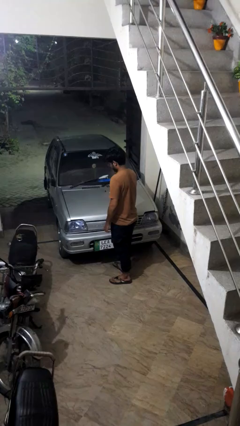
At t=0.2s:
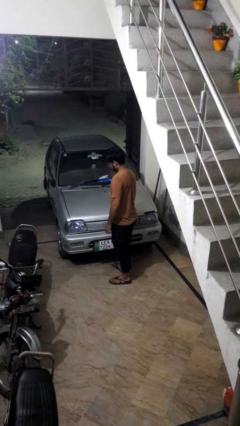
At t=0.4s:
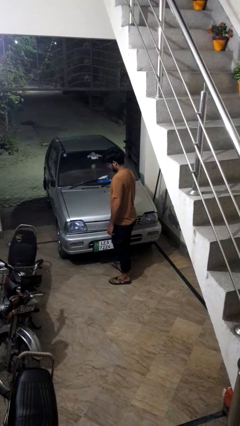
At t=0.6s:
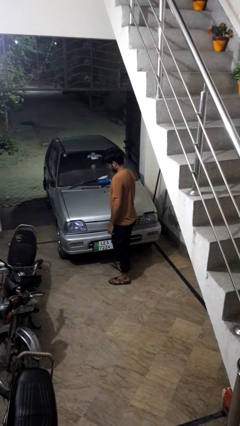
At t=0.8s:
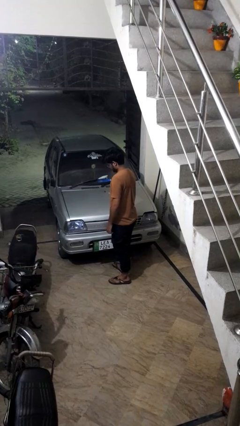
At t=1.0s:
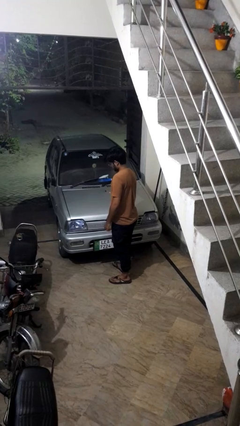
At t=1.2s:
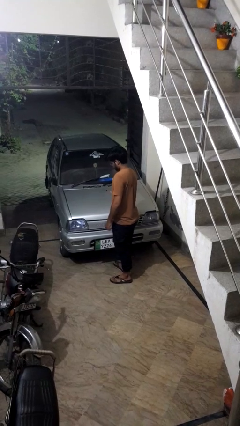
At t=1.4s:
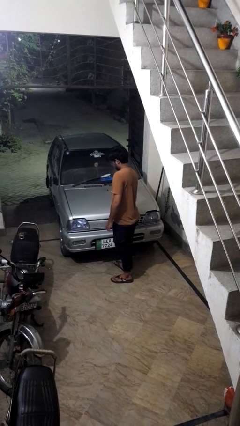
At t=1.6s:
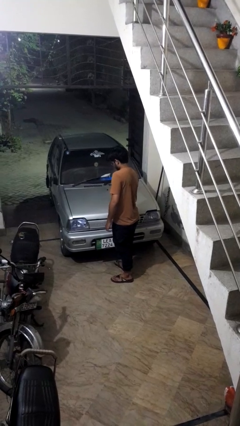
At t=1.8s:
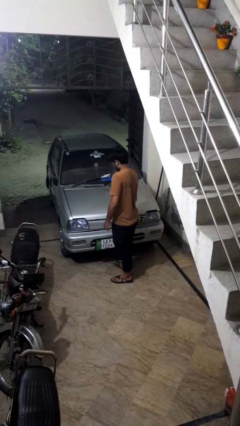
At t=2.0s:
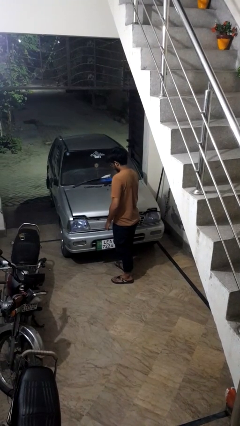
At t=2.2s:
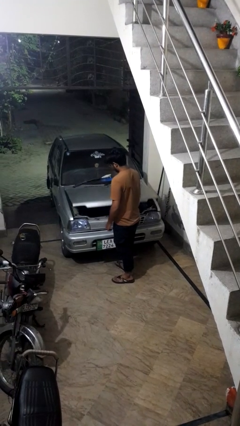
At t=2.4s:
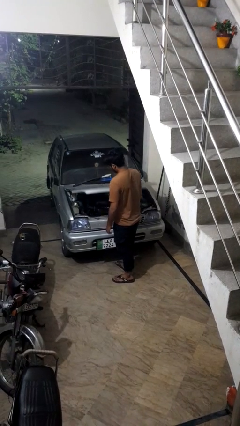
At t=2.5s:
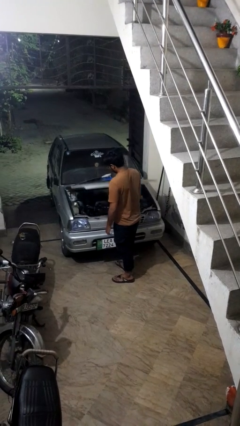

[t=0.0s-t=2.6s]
person opens car hood

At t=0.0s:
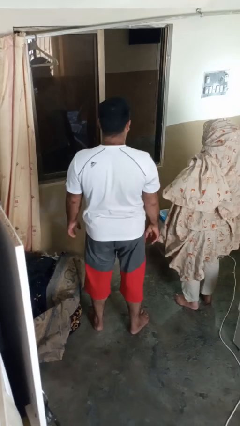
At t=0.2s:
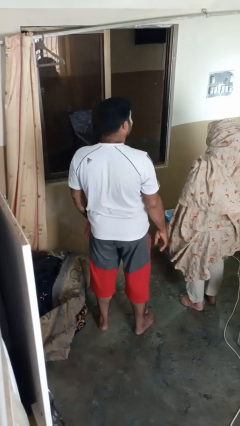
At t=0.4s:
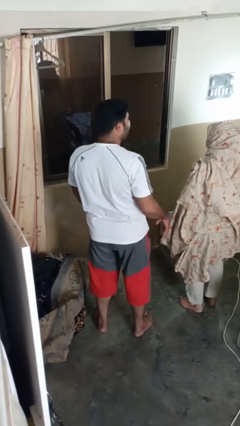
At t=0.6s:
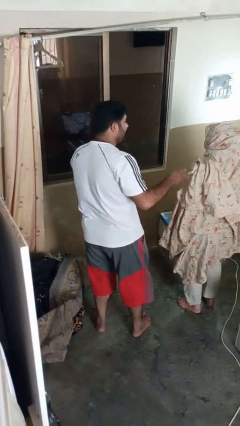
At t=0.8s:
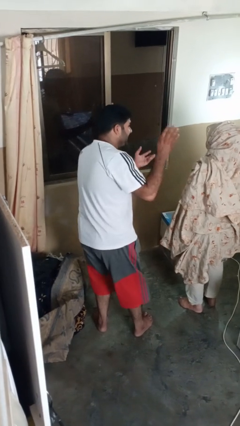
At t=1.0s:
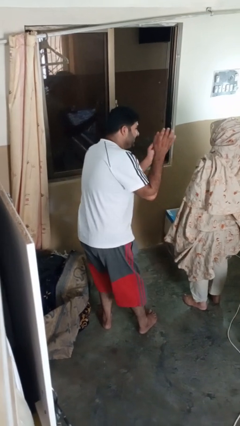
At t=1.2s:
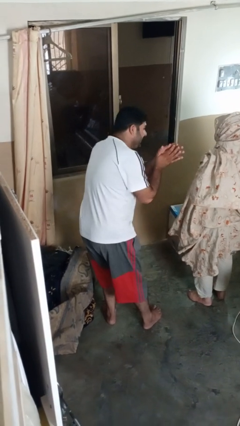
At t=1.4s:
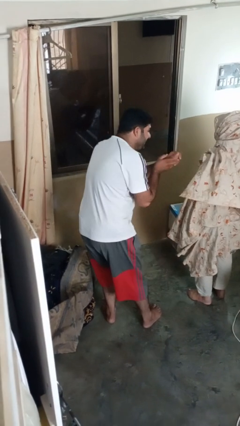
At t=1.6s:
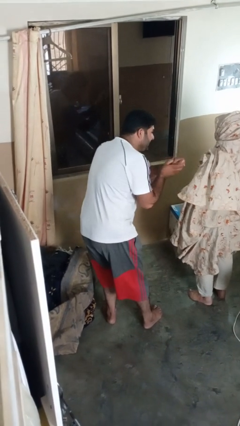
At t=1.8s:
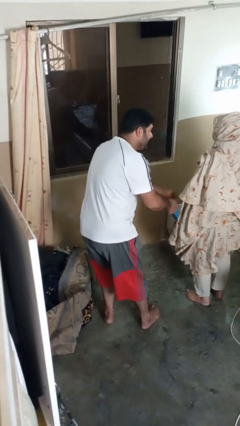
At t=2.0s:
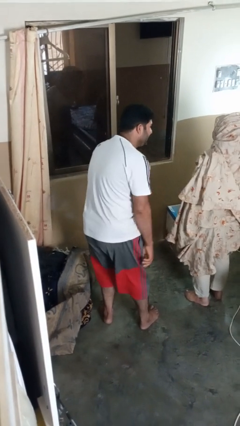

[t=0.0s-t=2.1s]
person laughs with person

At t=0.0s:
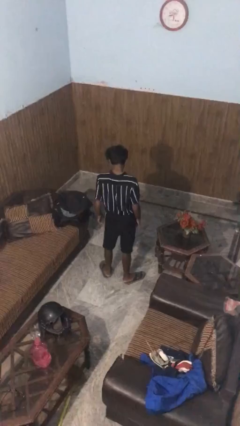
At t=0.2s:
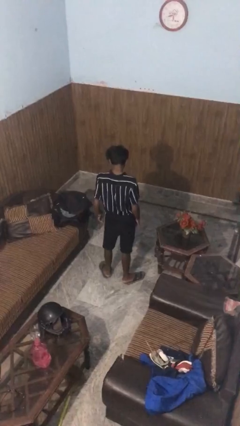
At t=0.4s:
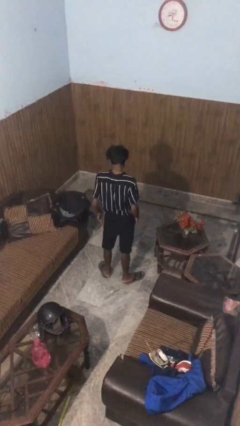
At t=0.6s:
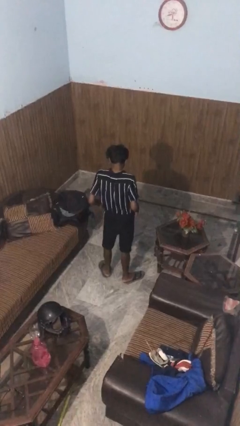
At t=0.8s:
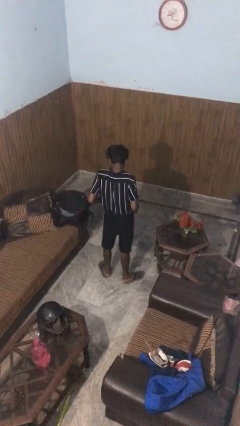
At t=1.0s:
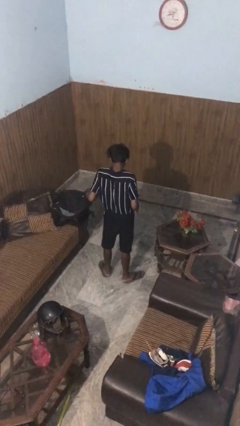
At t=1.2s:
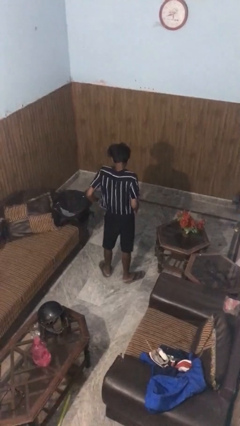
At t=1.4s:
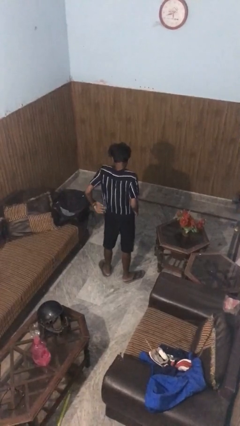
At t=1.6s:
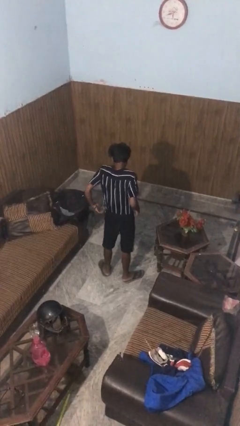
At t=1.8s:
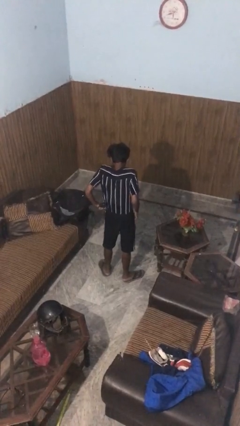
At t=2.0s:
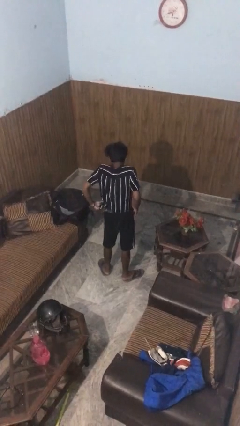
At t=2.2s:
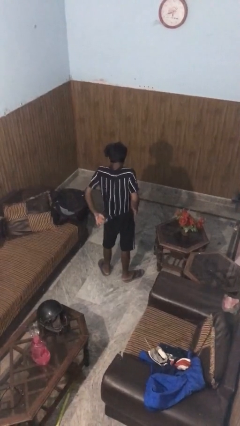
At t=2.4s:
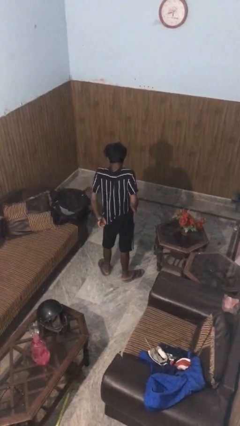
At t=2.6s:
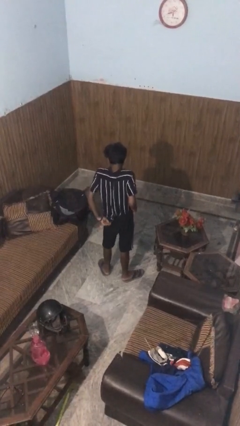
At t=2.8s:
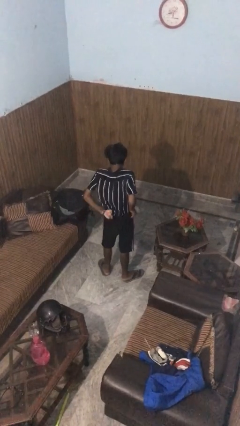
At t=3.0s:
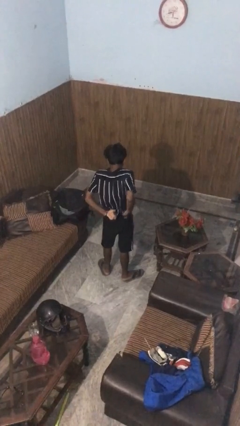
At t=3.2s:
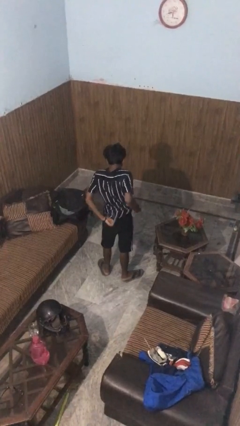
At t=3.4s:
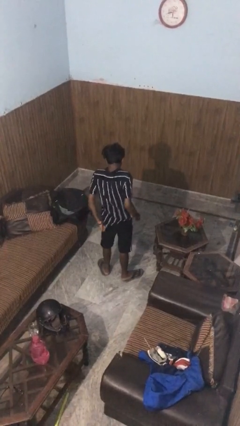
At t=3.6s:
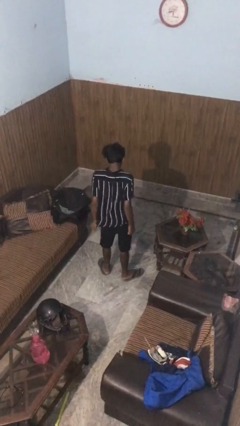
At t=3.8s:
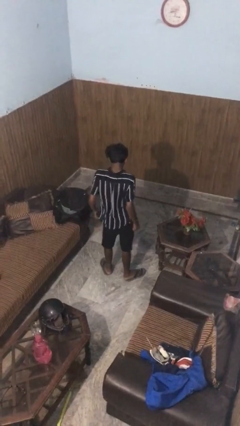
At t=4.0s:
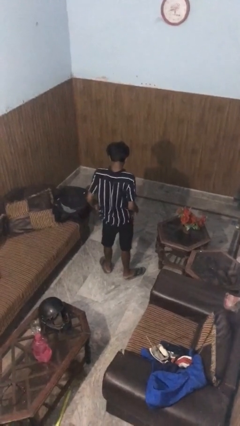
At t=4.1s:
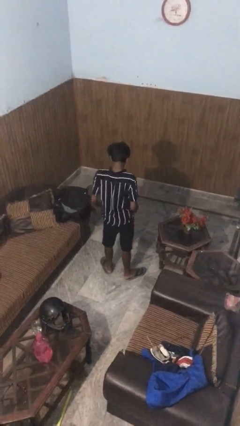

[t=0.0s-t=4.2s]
person untucks shirt

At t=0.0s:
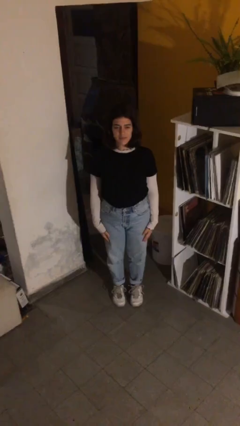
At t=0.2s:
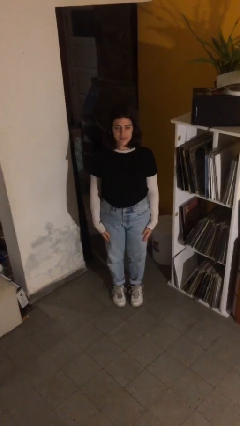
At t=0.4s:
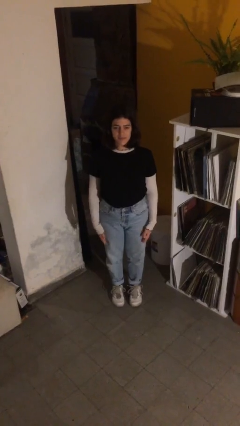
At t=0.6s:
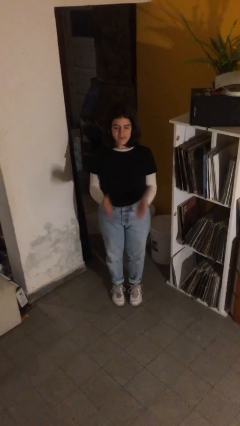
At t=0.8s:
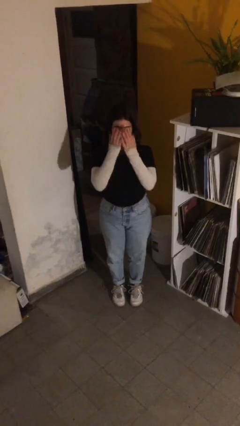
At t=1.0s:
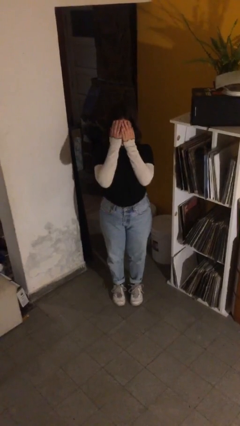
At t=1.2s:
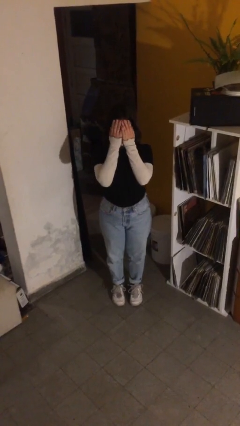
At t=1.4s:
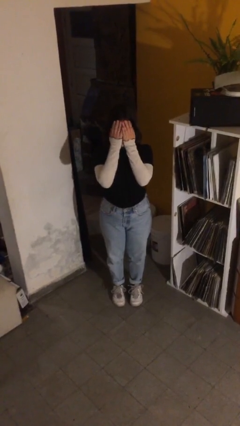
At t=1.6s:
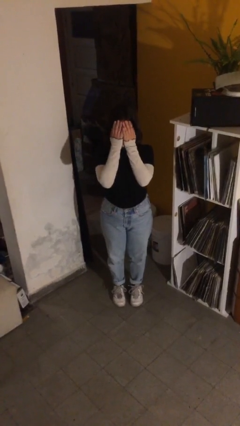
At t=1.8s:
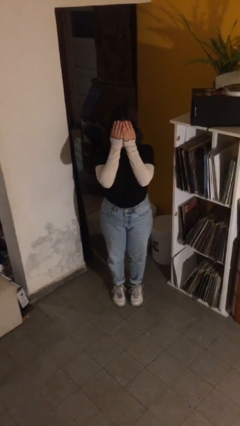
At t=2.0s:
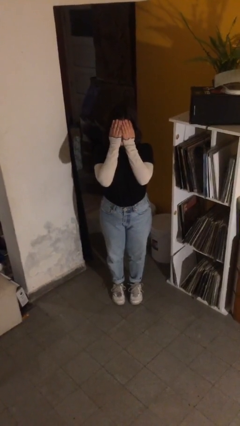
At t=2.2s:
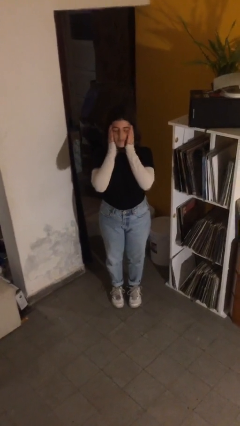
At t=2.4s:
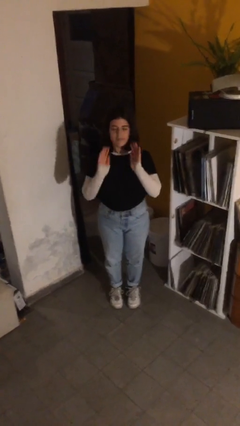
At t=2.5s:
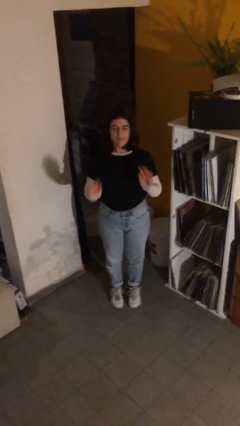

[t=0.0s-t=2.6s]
person covers face with hands

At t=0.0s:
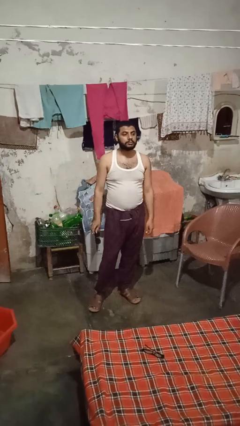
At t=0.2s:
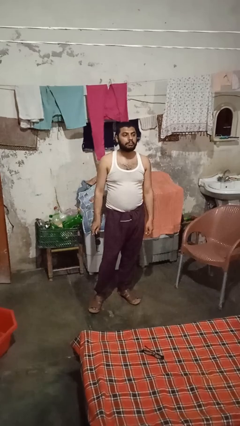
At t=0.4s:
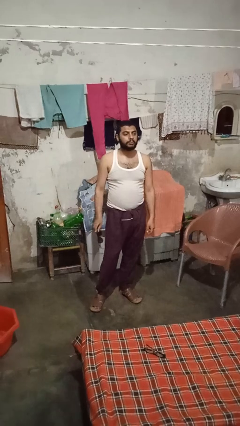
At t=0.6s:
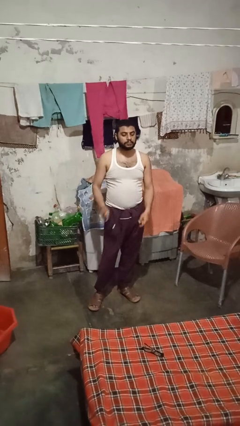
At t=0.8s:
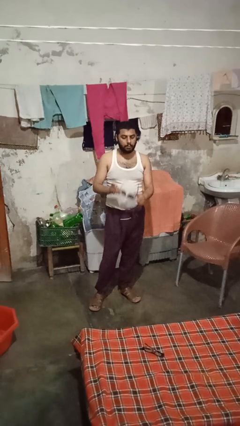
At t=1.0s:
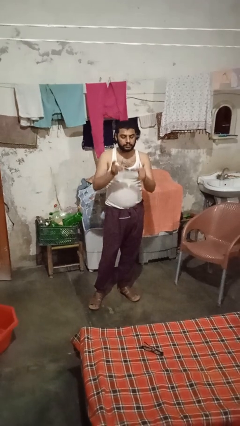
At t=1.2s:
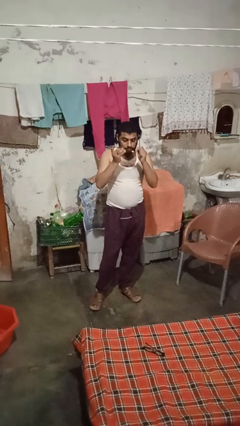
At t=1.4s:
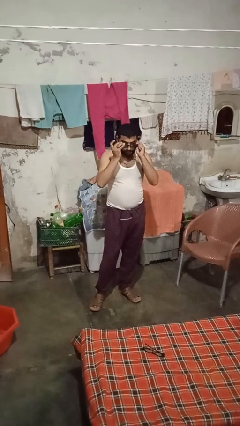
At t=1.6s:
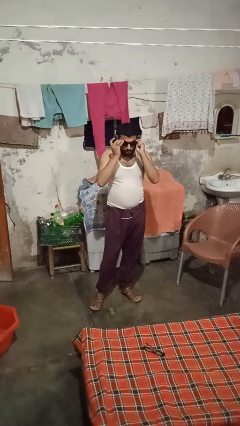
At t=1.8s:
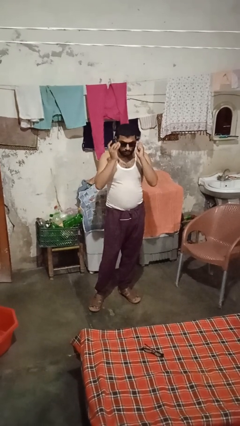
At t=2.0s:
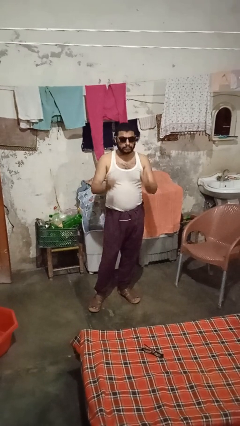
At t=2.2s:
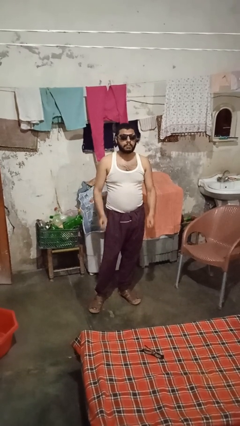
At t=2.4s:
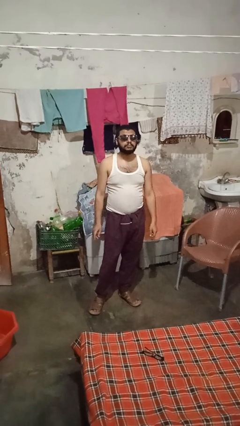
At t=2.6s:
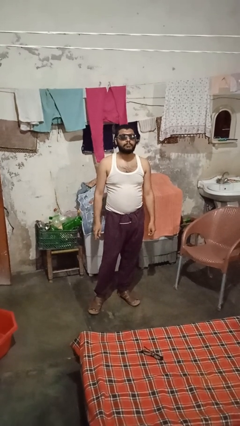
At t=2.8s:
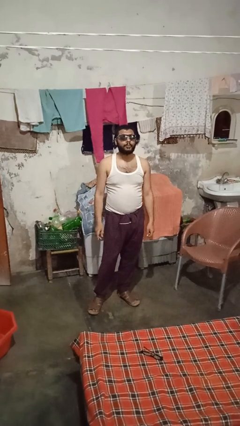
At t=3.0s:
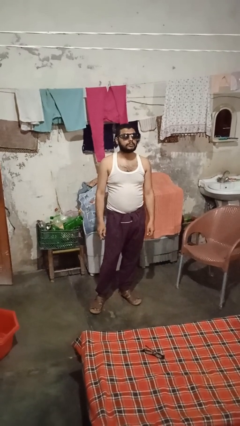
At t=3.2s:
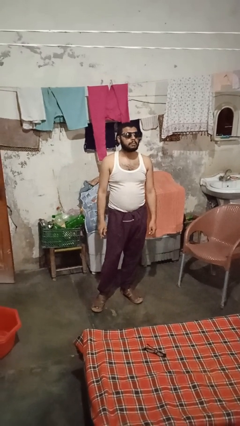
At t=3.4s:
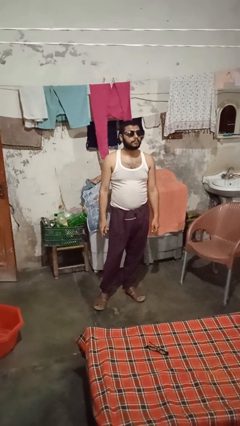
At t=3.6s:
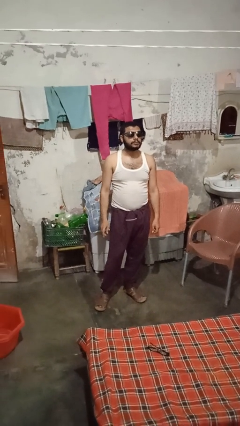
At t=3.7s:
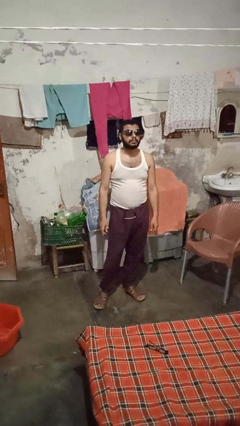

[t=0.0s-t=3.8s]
person puts on sunglasses

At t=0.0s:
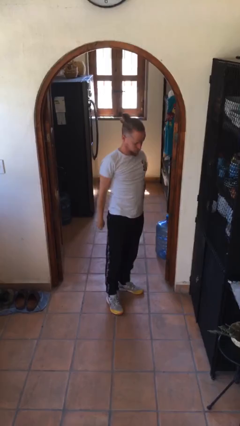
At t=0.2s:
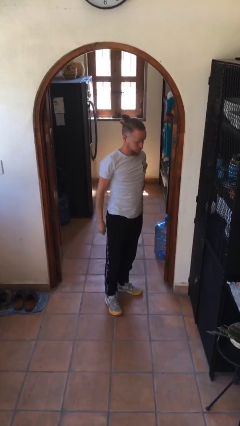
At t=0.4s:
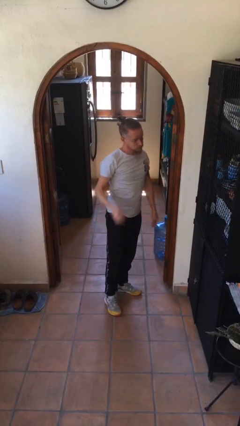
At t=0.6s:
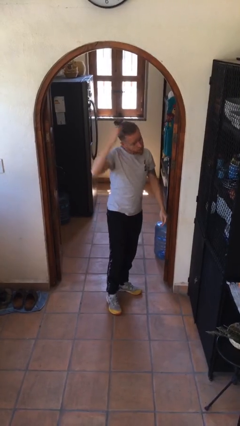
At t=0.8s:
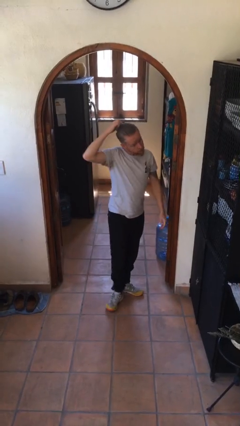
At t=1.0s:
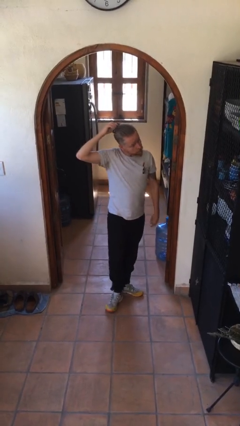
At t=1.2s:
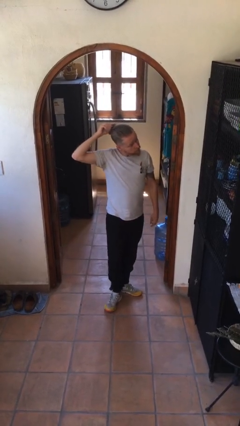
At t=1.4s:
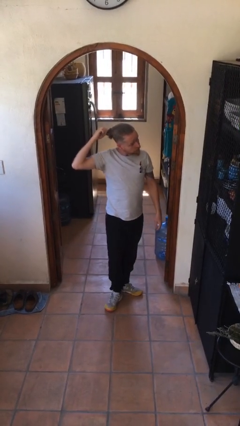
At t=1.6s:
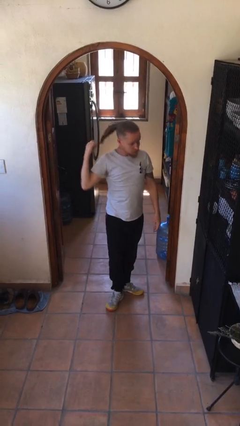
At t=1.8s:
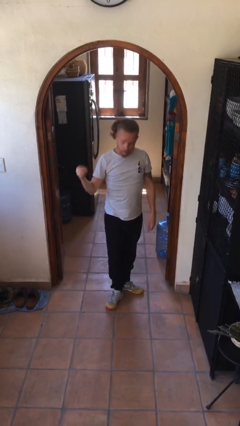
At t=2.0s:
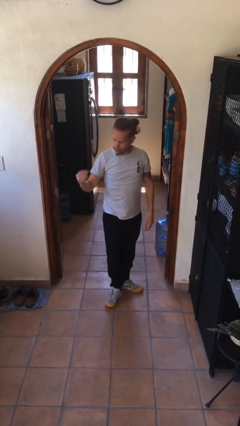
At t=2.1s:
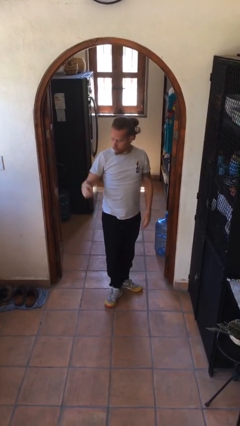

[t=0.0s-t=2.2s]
person takes off hairtie
